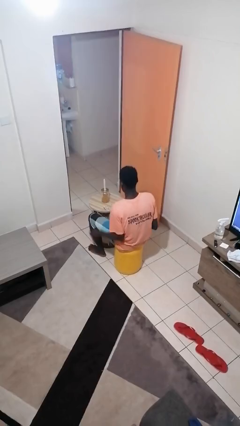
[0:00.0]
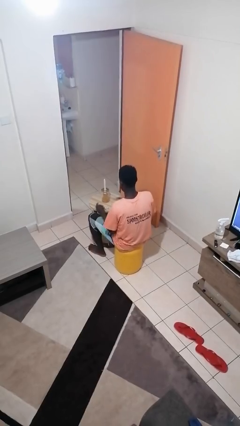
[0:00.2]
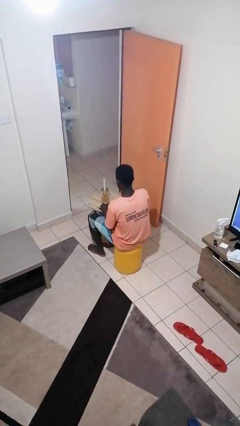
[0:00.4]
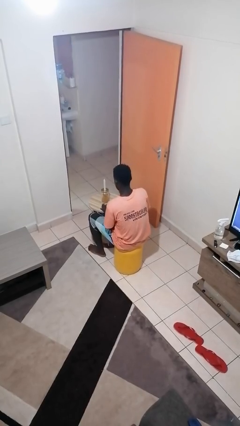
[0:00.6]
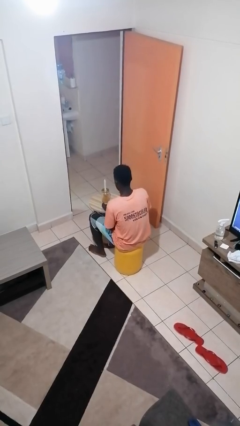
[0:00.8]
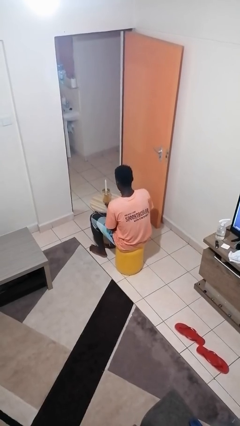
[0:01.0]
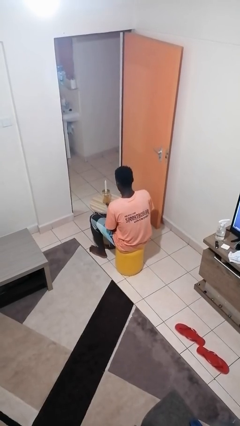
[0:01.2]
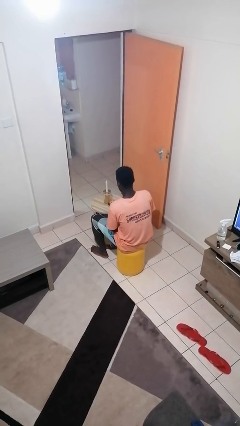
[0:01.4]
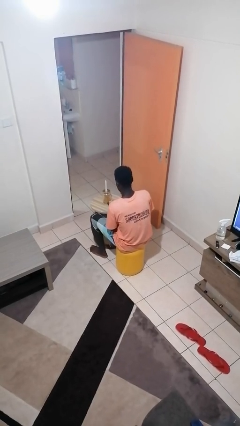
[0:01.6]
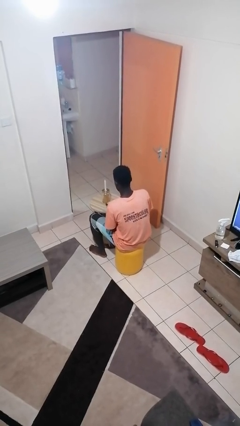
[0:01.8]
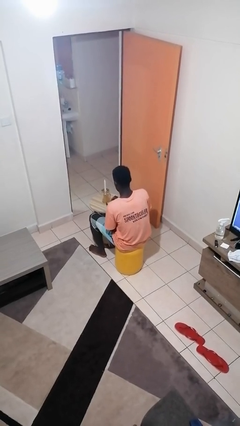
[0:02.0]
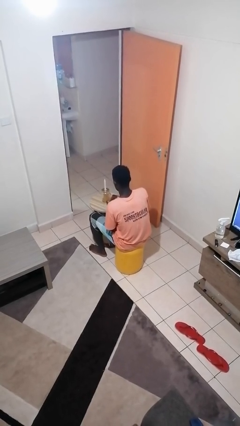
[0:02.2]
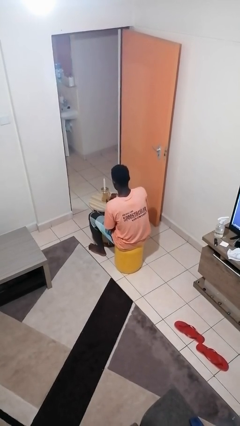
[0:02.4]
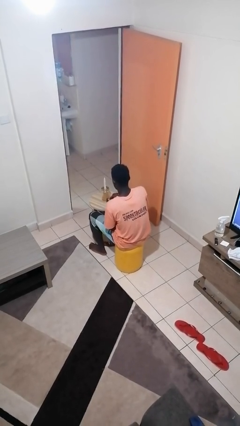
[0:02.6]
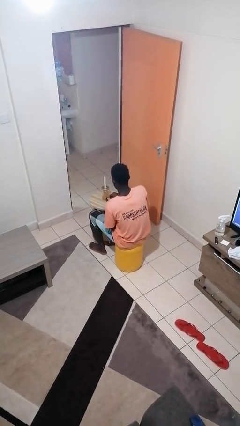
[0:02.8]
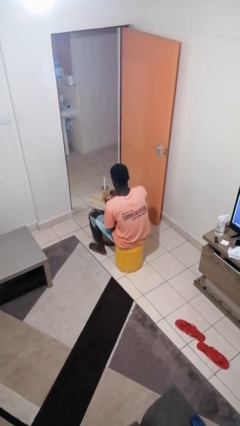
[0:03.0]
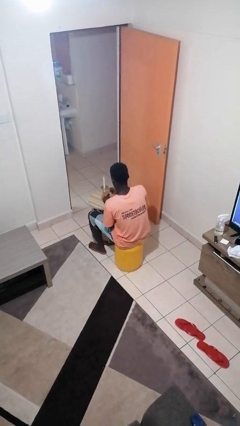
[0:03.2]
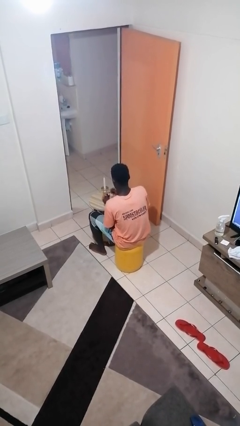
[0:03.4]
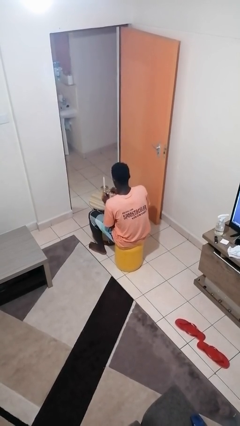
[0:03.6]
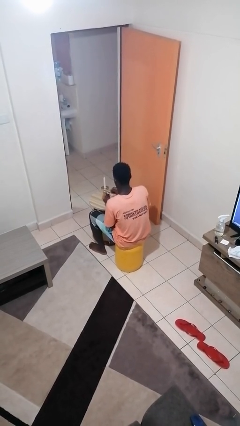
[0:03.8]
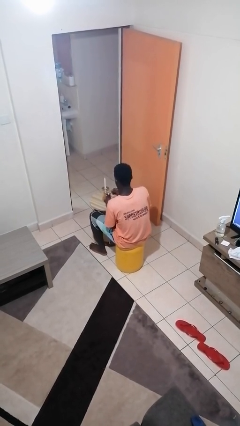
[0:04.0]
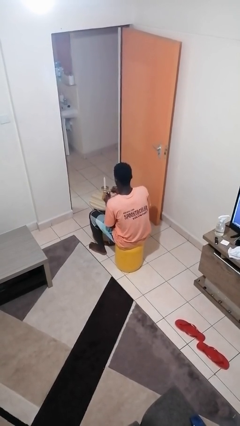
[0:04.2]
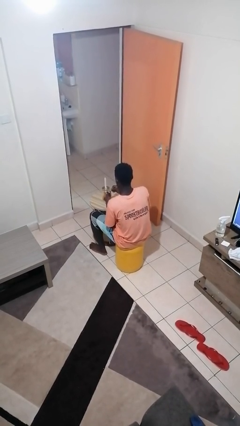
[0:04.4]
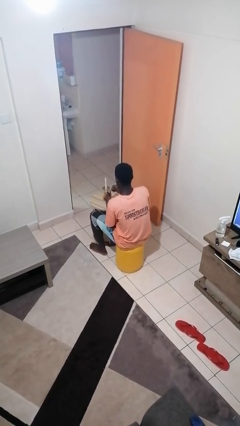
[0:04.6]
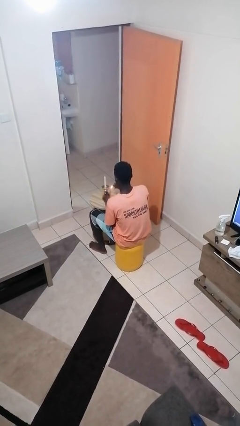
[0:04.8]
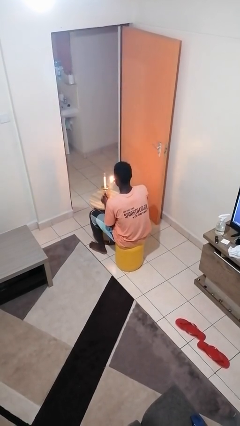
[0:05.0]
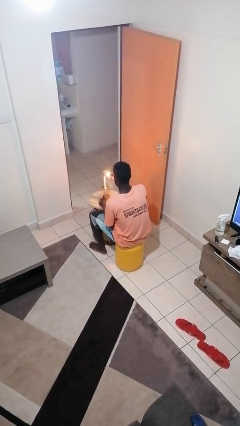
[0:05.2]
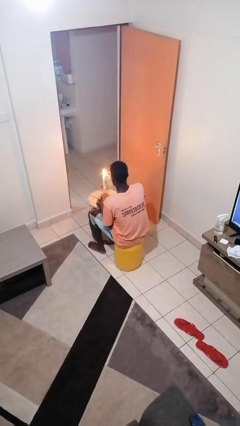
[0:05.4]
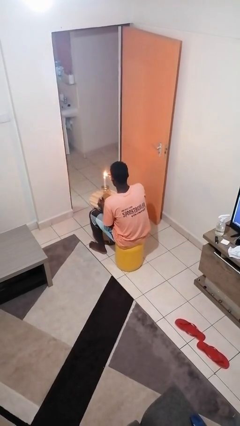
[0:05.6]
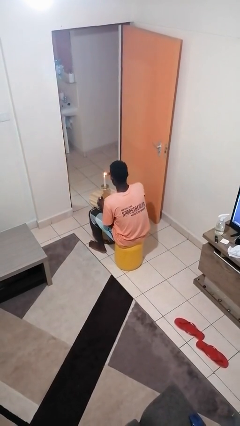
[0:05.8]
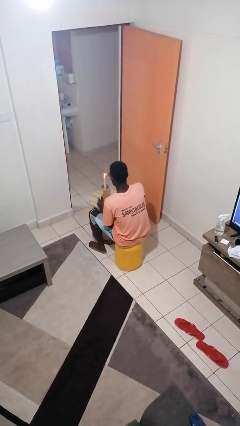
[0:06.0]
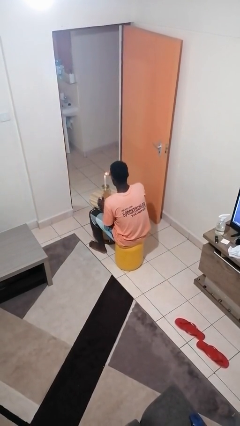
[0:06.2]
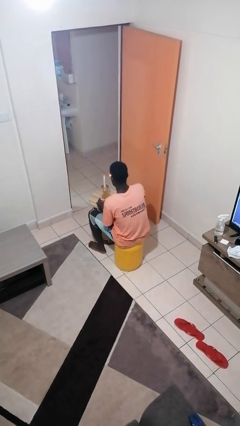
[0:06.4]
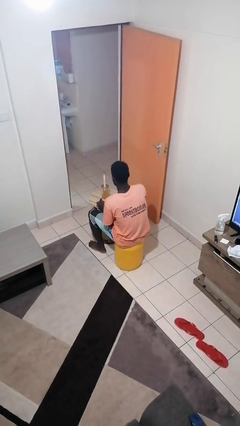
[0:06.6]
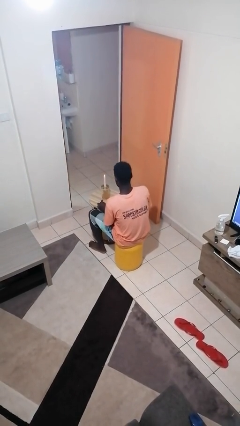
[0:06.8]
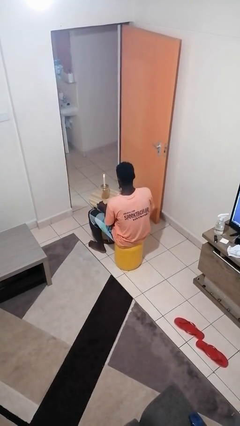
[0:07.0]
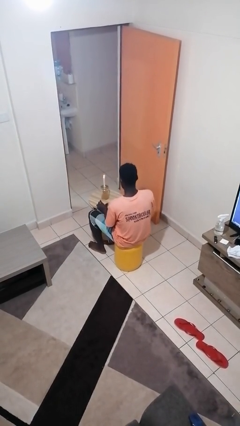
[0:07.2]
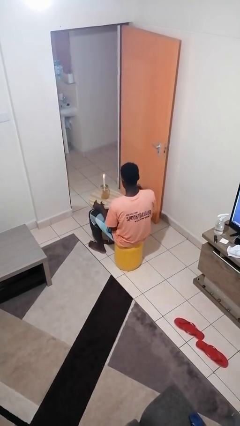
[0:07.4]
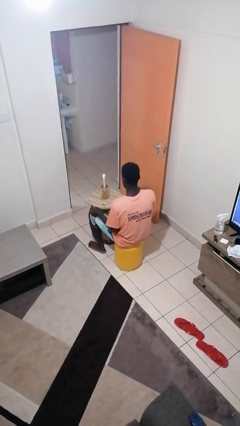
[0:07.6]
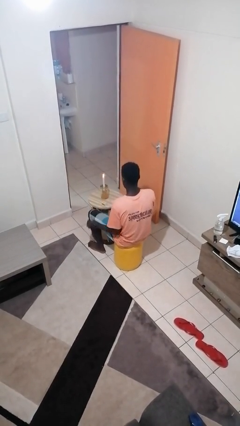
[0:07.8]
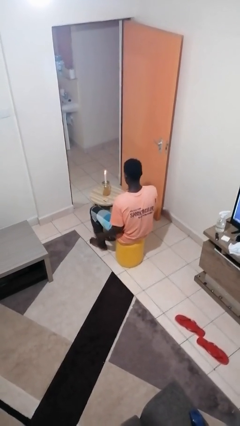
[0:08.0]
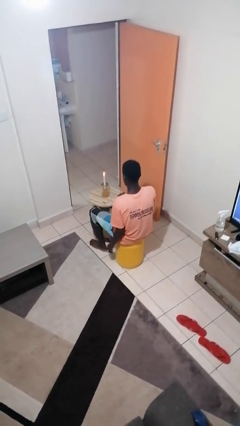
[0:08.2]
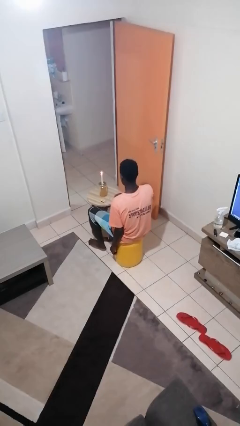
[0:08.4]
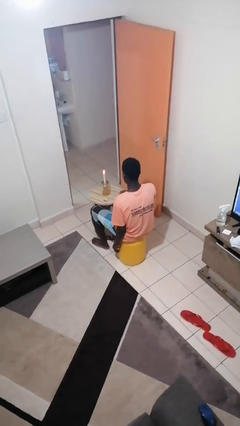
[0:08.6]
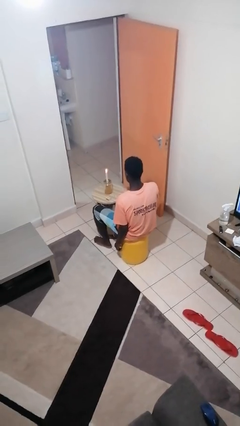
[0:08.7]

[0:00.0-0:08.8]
person lights candle

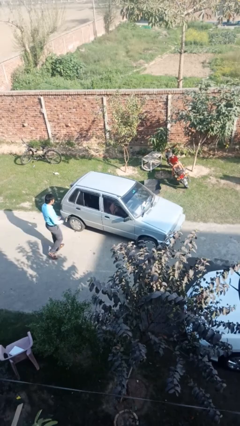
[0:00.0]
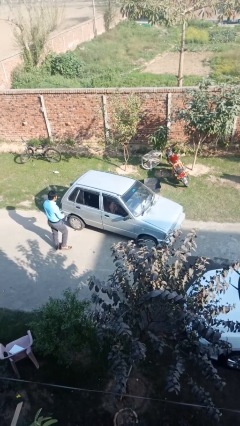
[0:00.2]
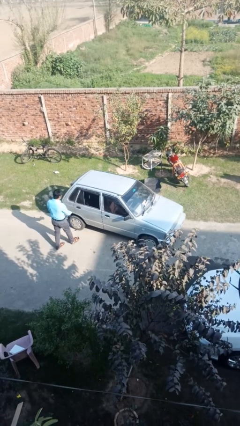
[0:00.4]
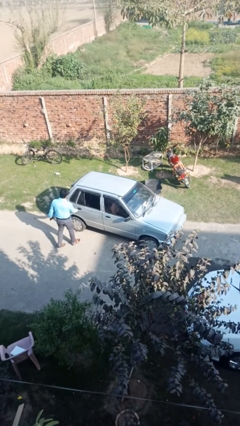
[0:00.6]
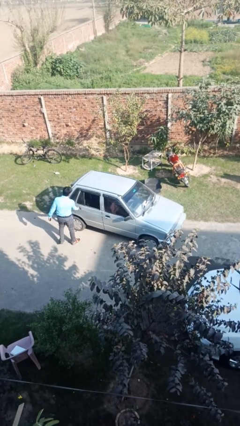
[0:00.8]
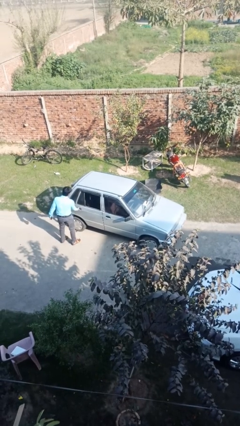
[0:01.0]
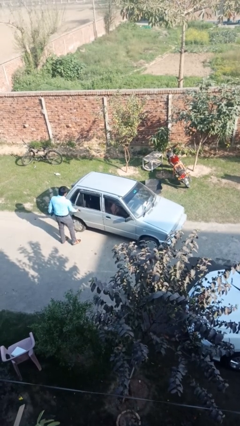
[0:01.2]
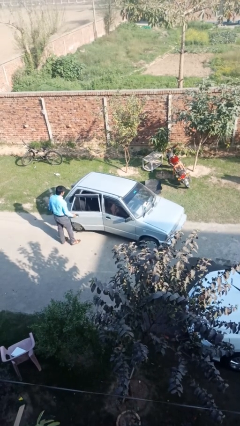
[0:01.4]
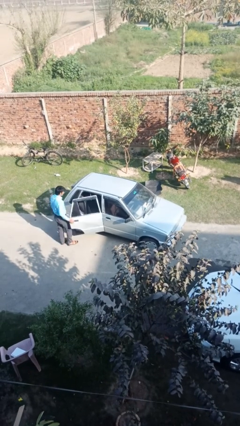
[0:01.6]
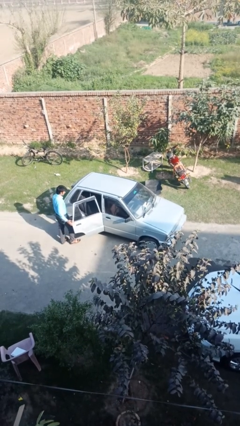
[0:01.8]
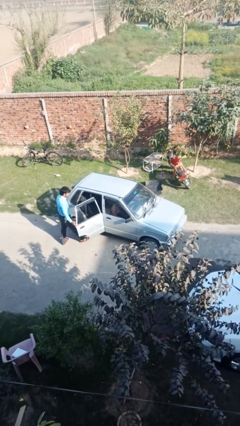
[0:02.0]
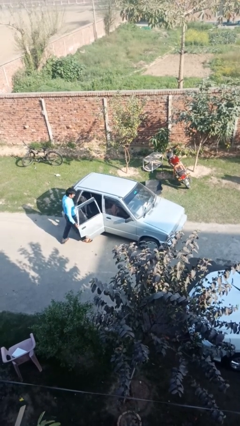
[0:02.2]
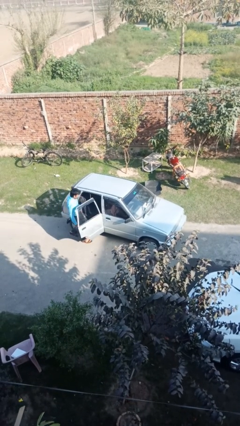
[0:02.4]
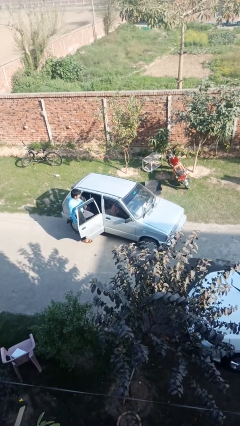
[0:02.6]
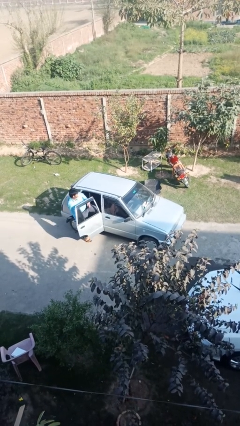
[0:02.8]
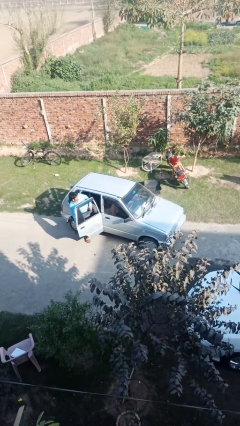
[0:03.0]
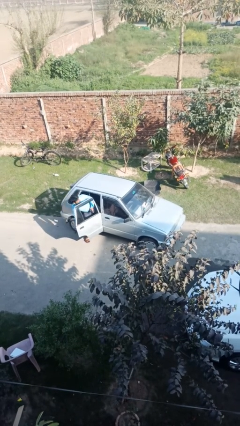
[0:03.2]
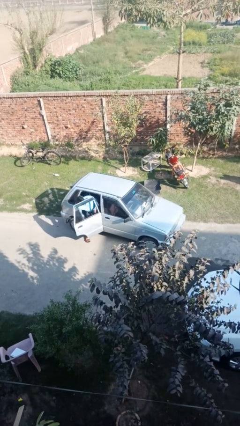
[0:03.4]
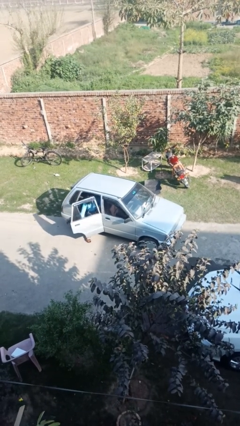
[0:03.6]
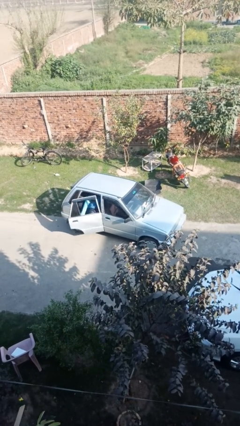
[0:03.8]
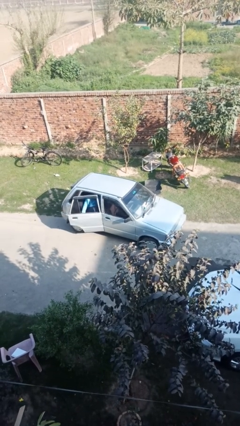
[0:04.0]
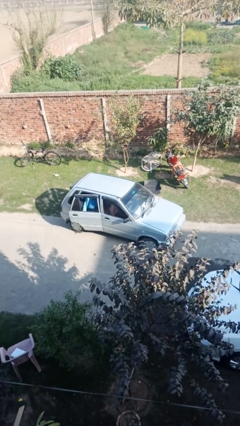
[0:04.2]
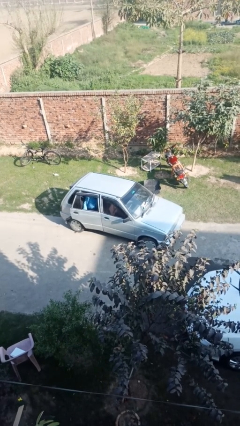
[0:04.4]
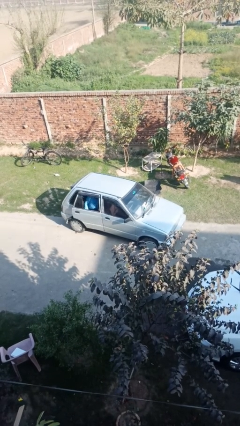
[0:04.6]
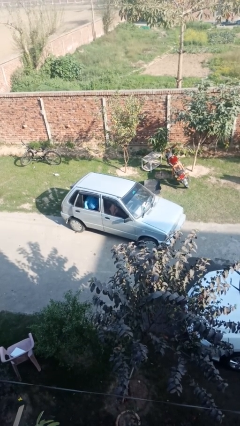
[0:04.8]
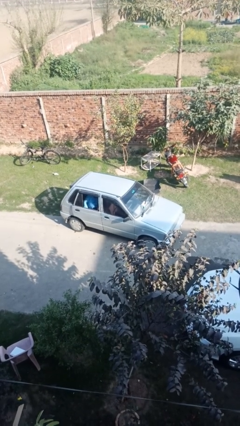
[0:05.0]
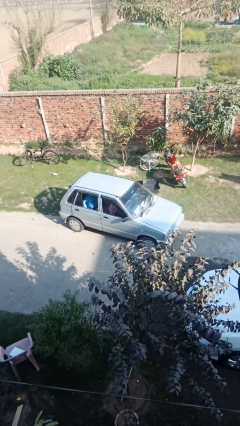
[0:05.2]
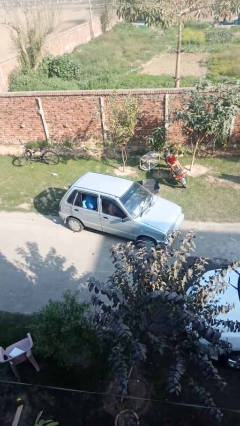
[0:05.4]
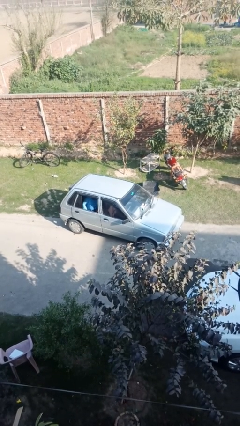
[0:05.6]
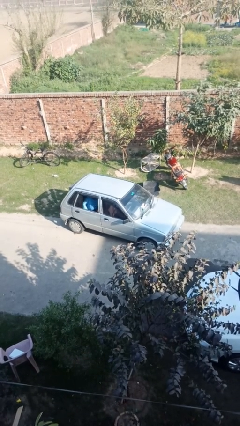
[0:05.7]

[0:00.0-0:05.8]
car picks up person

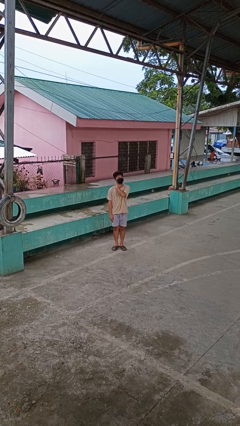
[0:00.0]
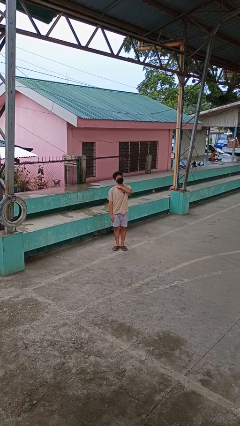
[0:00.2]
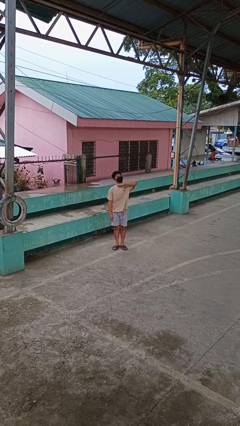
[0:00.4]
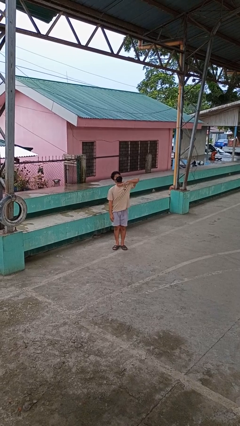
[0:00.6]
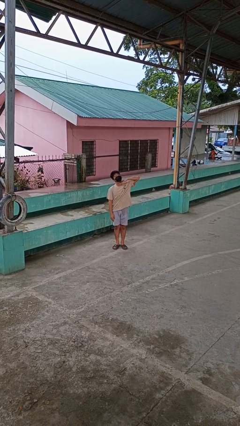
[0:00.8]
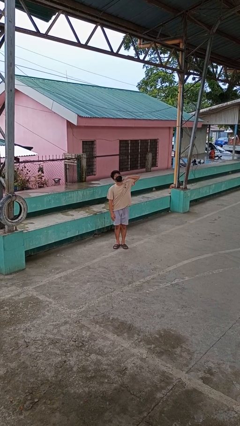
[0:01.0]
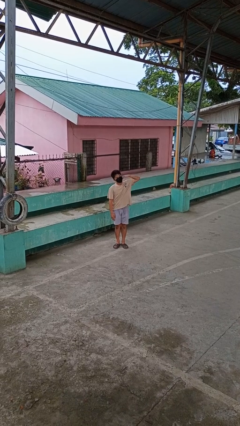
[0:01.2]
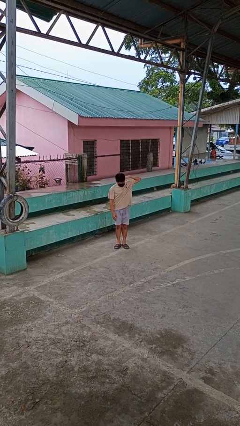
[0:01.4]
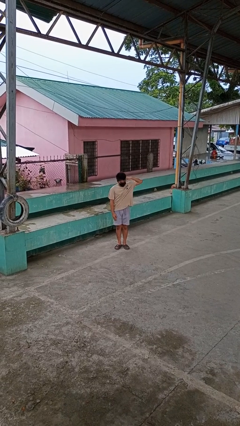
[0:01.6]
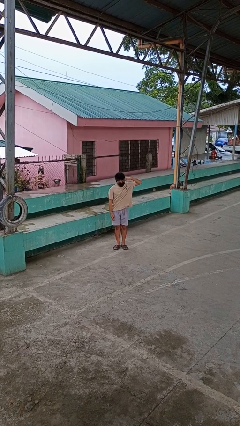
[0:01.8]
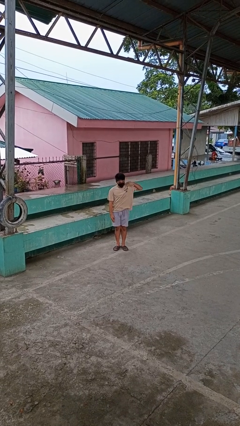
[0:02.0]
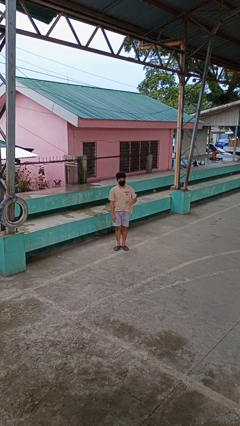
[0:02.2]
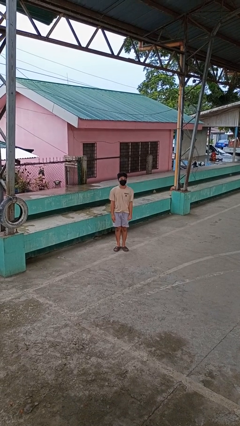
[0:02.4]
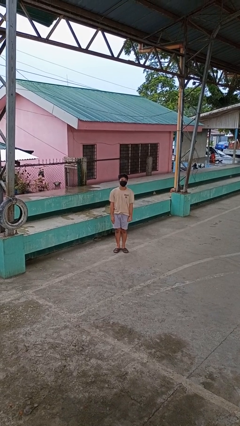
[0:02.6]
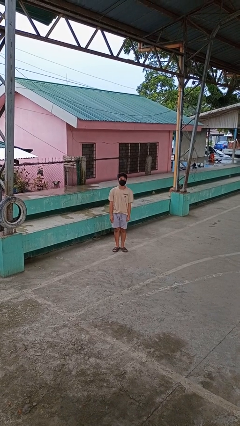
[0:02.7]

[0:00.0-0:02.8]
person gestures cut

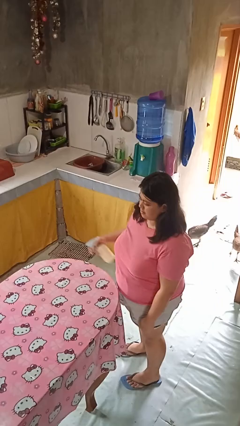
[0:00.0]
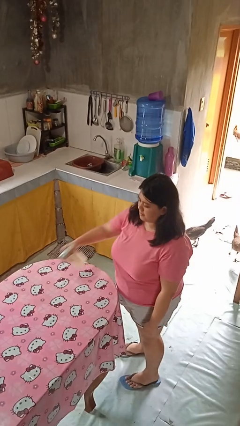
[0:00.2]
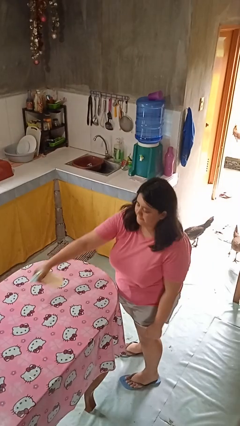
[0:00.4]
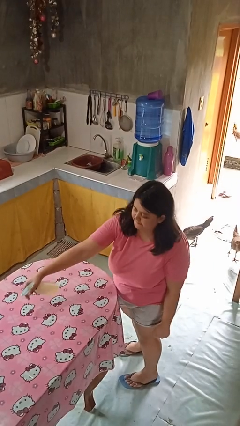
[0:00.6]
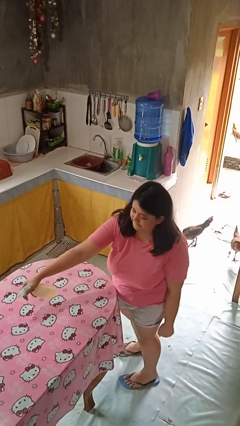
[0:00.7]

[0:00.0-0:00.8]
person sprays from bottle
